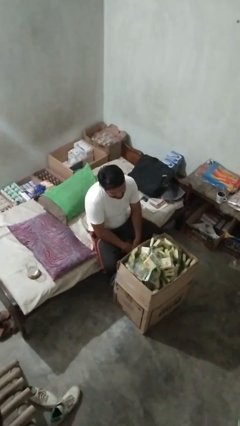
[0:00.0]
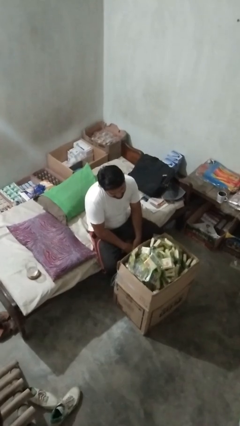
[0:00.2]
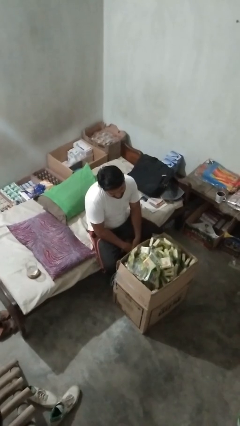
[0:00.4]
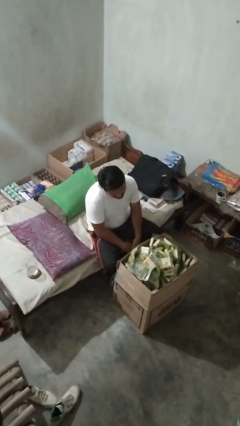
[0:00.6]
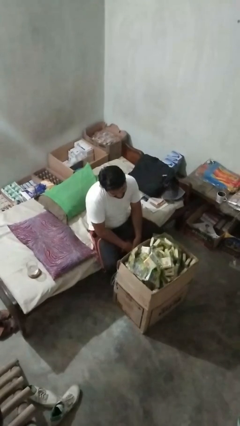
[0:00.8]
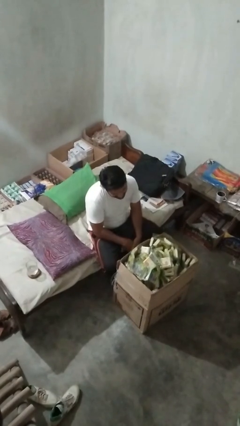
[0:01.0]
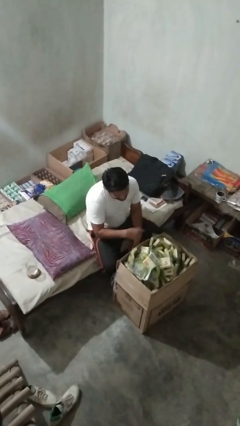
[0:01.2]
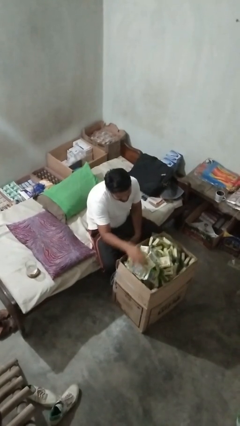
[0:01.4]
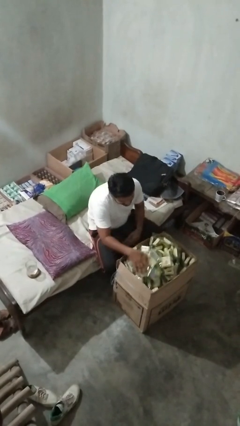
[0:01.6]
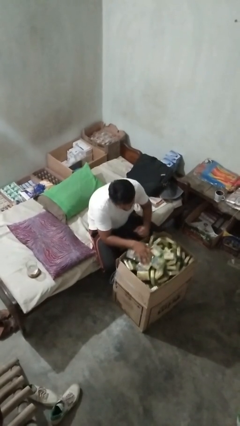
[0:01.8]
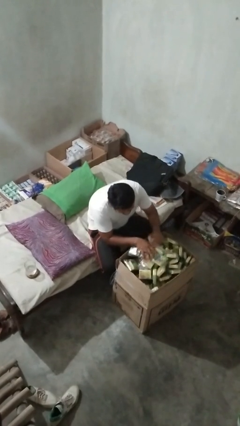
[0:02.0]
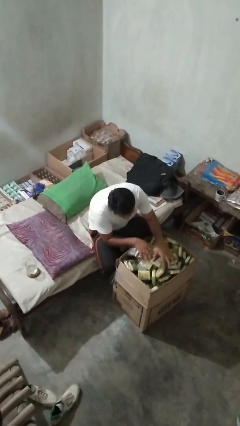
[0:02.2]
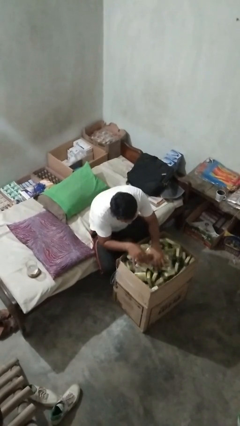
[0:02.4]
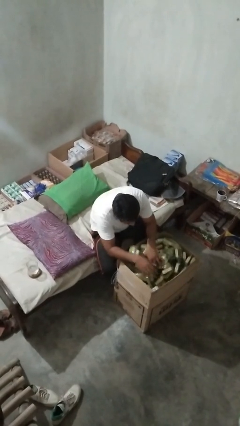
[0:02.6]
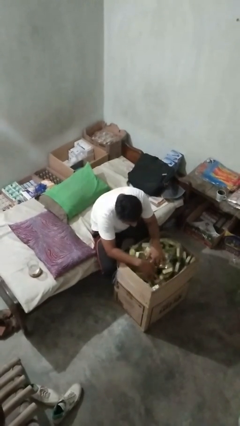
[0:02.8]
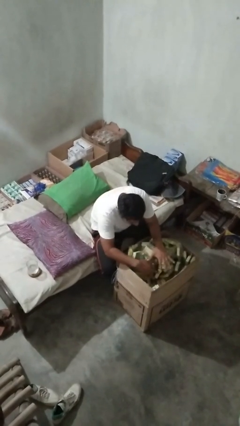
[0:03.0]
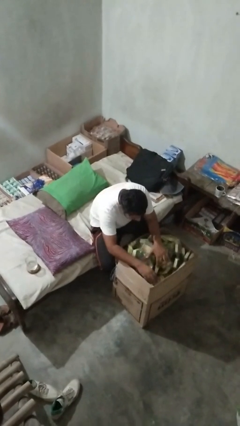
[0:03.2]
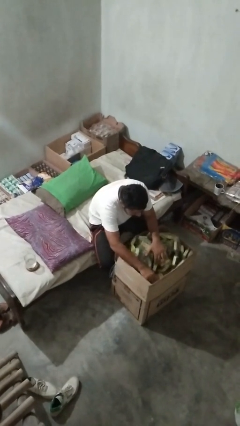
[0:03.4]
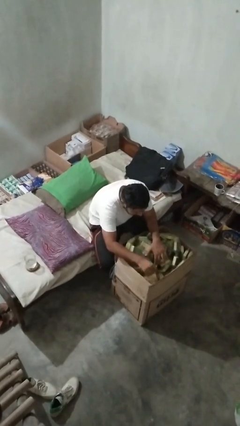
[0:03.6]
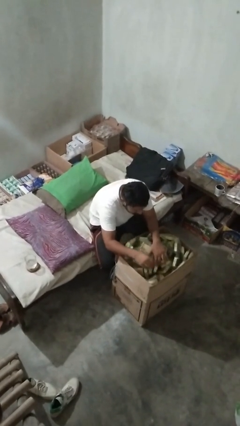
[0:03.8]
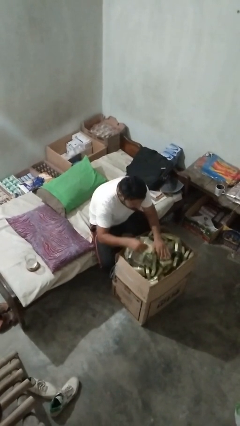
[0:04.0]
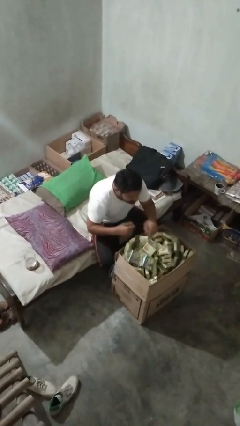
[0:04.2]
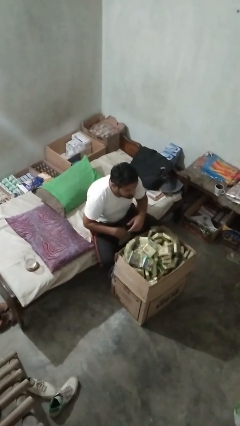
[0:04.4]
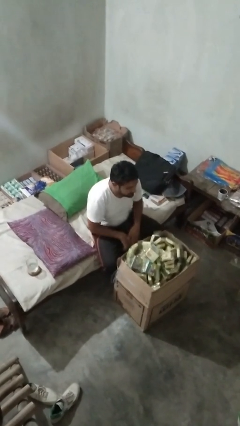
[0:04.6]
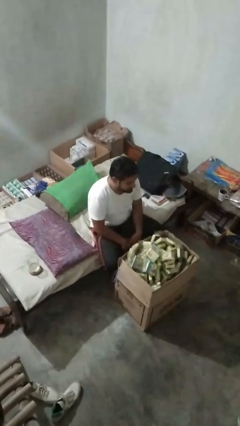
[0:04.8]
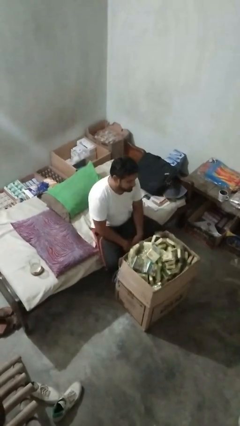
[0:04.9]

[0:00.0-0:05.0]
person searches in box

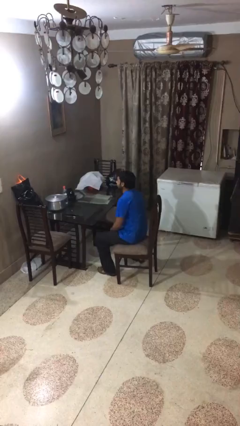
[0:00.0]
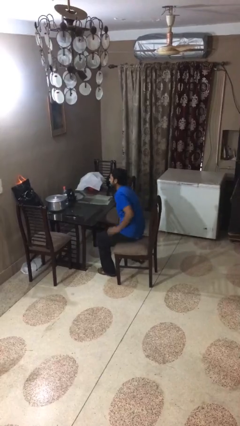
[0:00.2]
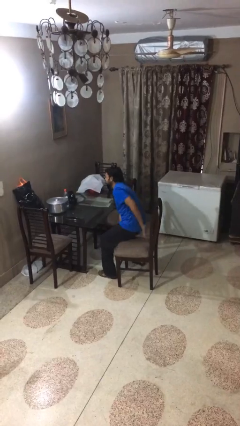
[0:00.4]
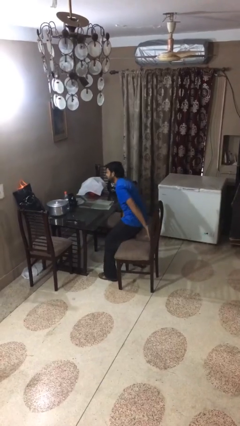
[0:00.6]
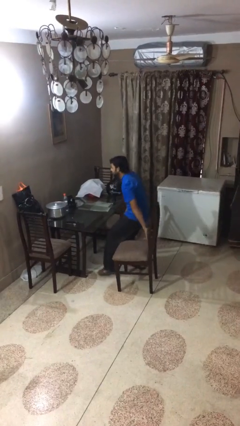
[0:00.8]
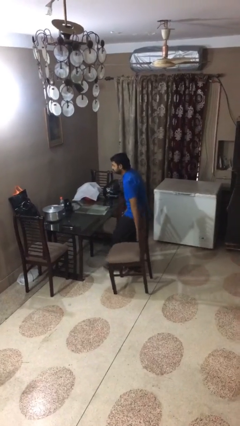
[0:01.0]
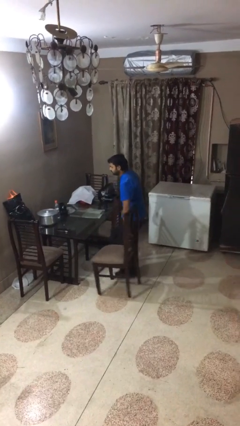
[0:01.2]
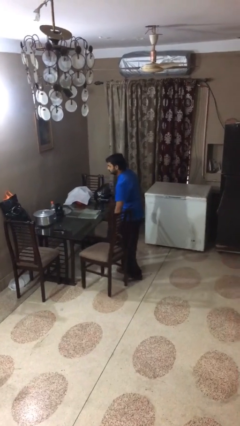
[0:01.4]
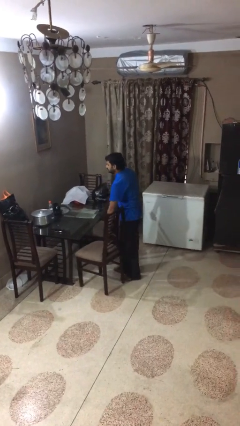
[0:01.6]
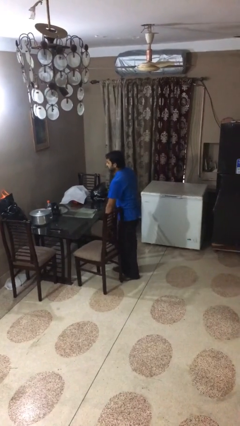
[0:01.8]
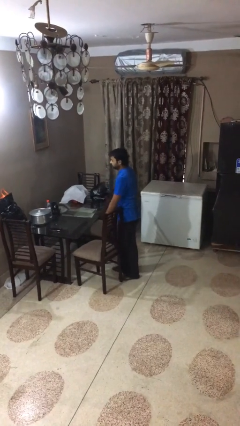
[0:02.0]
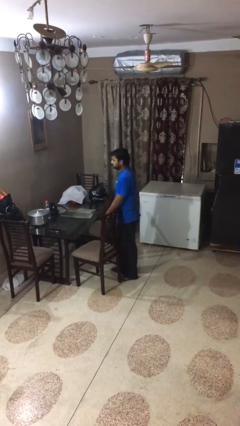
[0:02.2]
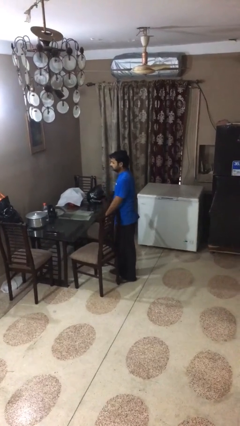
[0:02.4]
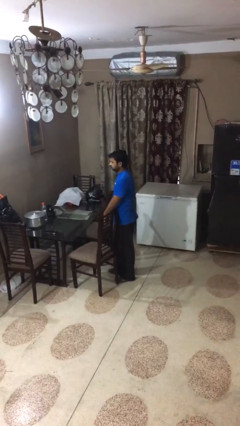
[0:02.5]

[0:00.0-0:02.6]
person stands up

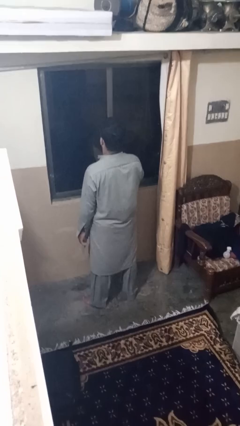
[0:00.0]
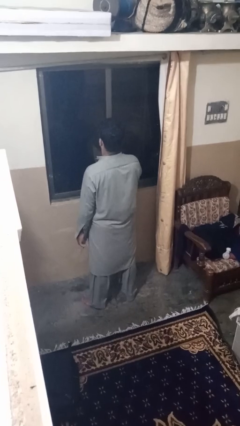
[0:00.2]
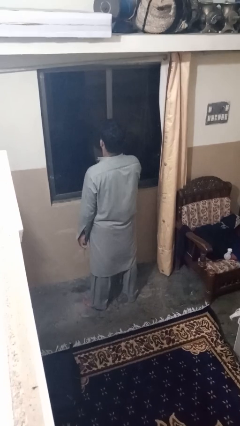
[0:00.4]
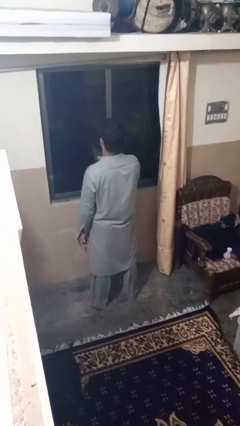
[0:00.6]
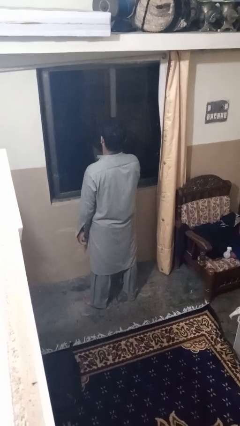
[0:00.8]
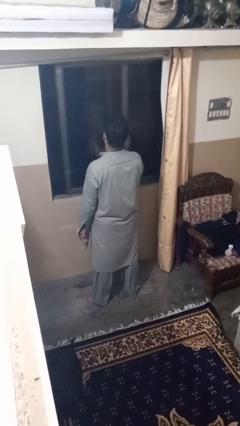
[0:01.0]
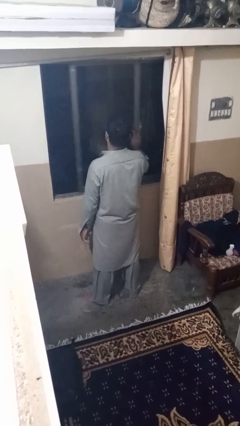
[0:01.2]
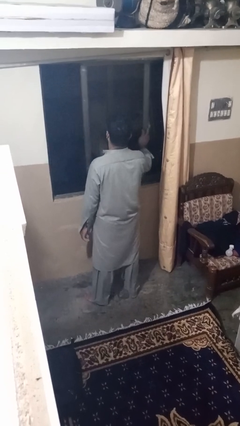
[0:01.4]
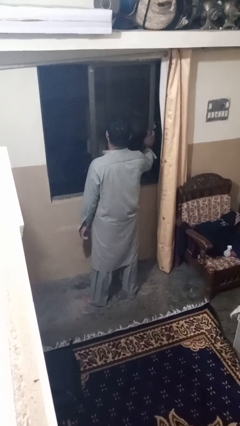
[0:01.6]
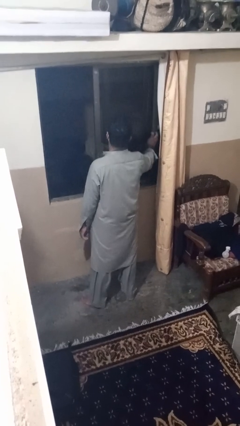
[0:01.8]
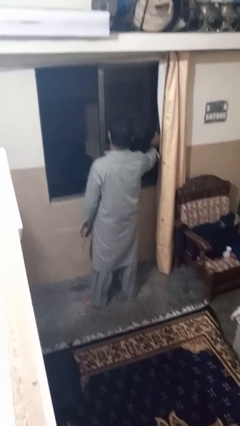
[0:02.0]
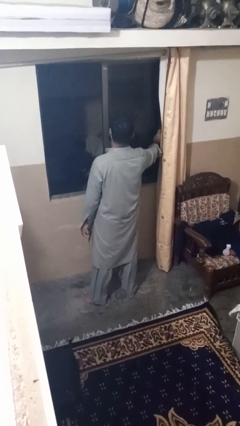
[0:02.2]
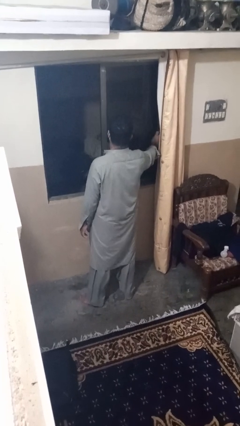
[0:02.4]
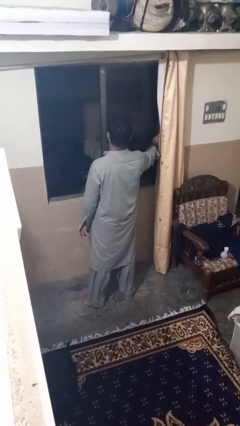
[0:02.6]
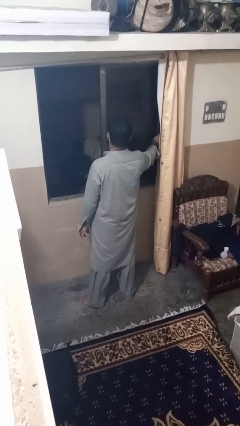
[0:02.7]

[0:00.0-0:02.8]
person opens home window

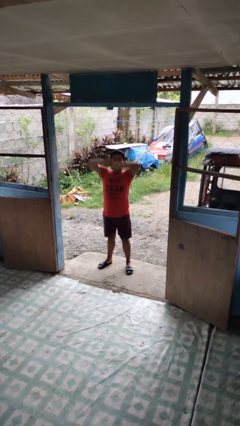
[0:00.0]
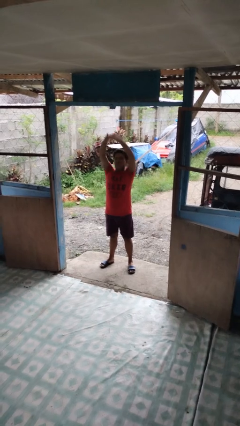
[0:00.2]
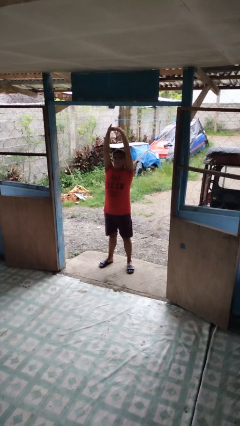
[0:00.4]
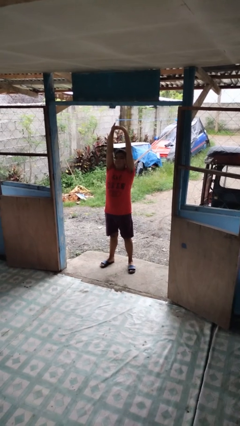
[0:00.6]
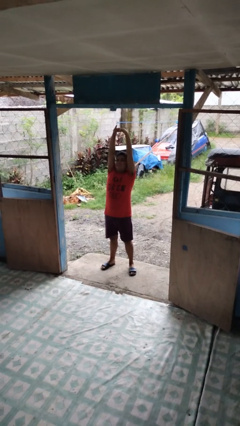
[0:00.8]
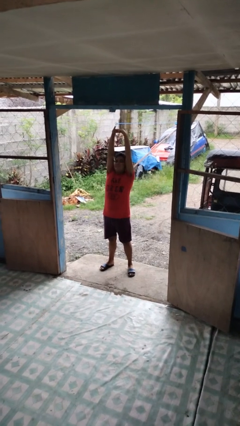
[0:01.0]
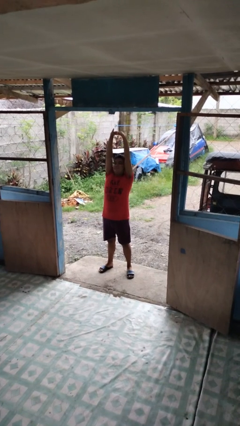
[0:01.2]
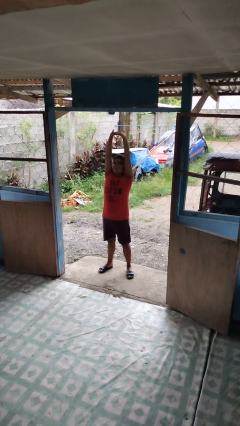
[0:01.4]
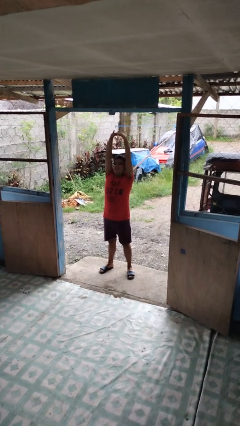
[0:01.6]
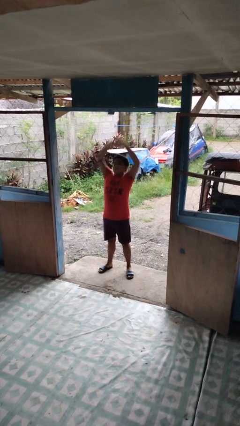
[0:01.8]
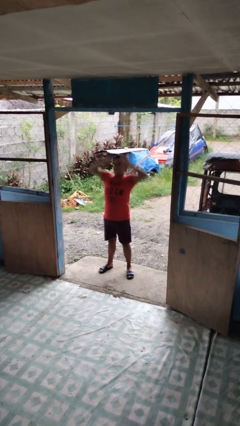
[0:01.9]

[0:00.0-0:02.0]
person stretches arms over head

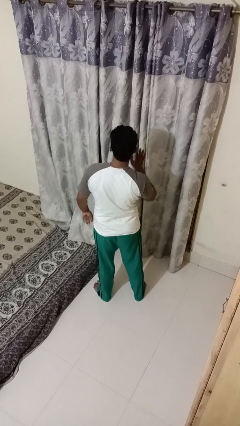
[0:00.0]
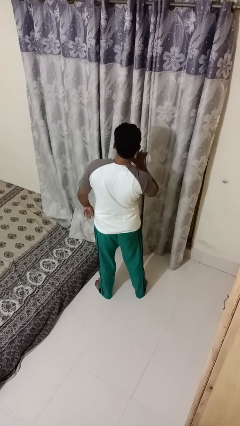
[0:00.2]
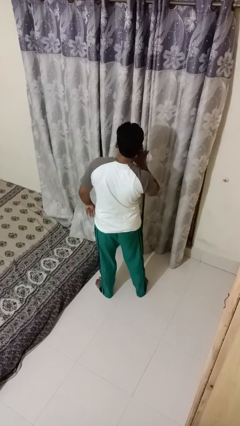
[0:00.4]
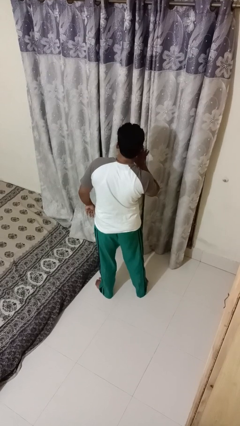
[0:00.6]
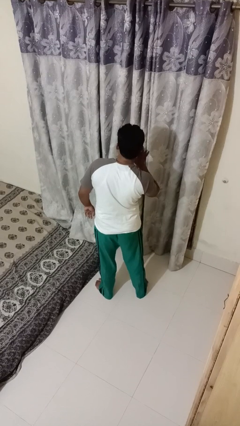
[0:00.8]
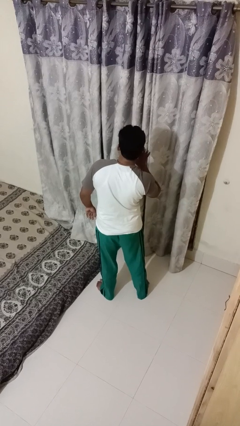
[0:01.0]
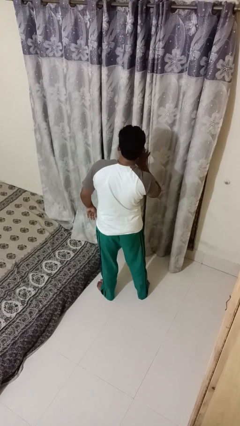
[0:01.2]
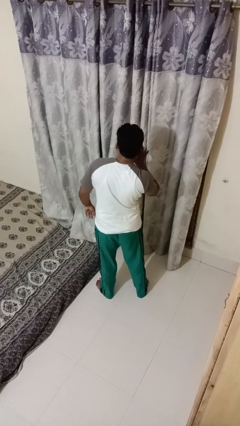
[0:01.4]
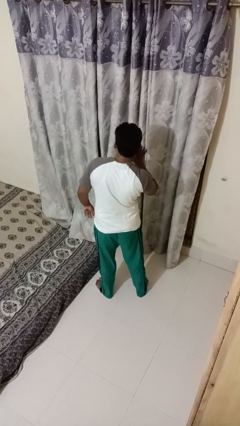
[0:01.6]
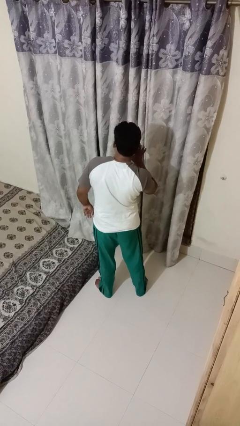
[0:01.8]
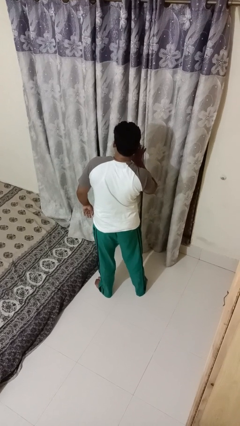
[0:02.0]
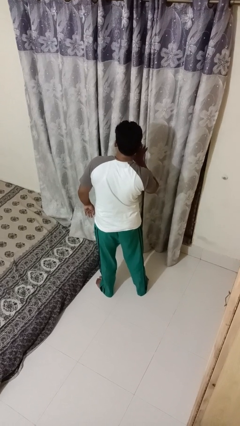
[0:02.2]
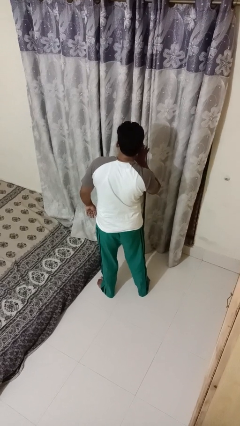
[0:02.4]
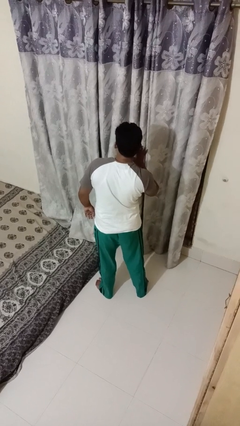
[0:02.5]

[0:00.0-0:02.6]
person gestures listen closely

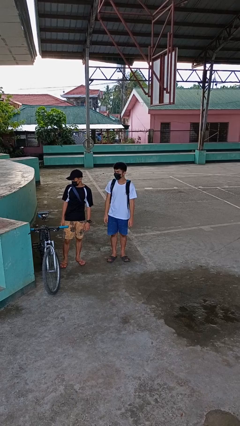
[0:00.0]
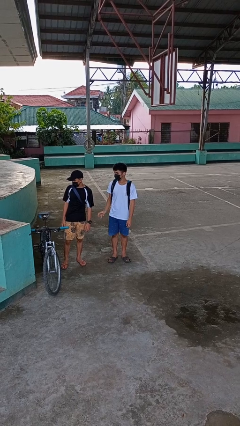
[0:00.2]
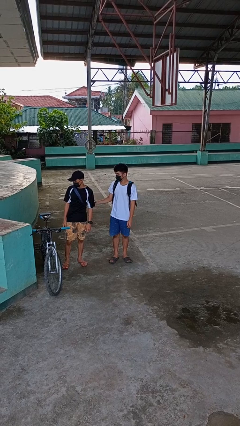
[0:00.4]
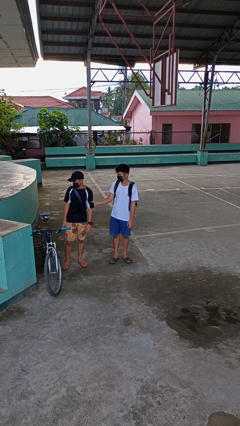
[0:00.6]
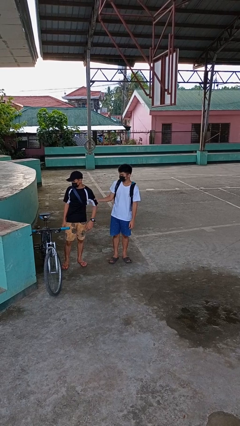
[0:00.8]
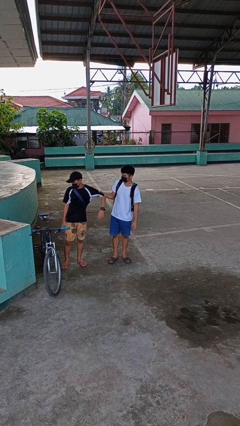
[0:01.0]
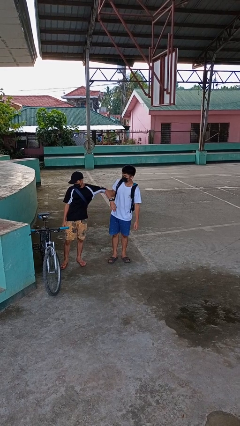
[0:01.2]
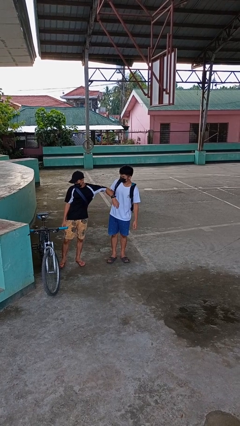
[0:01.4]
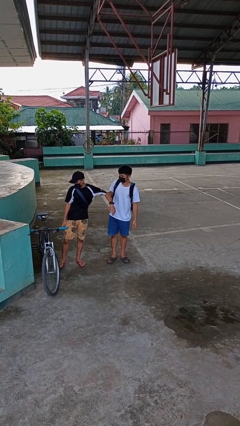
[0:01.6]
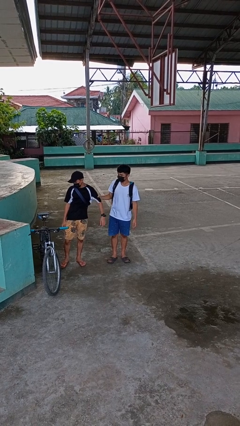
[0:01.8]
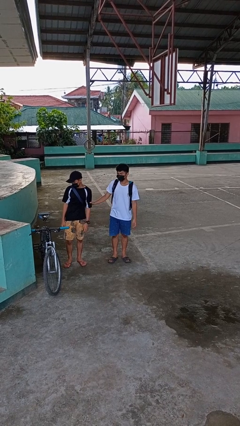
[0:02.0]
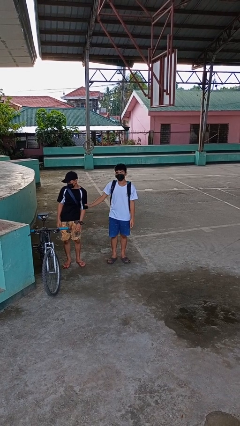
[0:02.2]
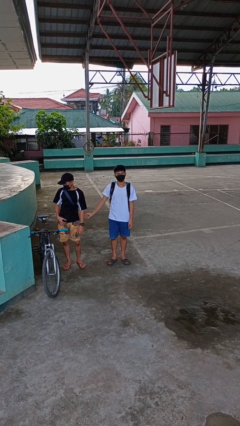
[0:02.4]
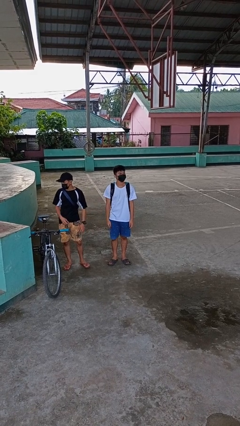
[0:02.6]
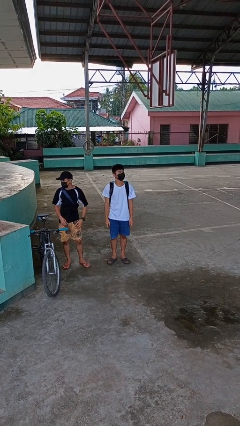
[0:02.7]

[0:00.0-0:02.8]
person grabs person by bicep
